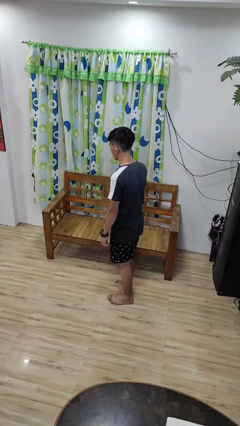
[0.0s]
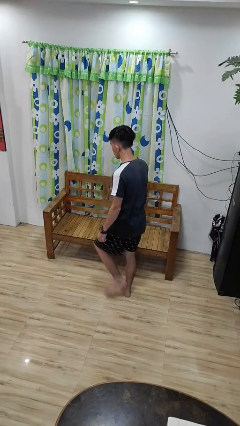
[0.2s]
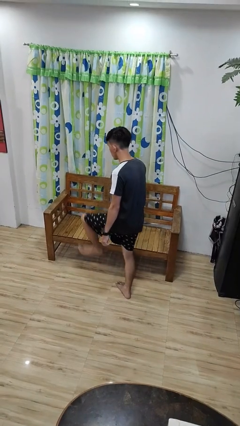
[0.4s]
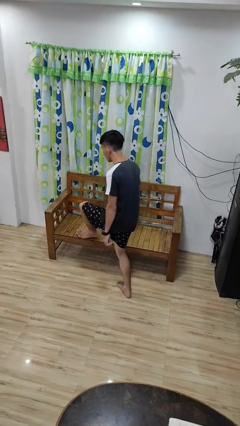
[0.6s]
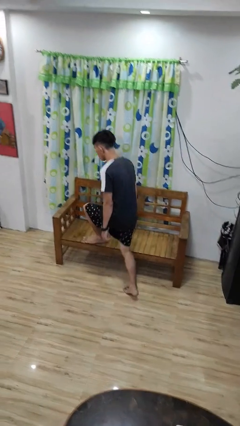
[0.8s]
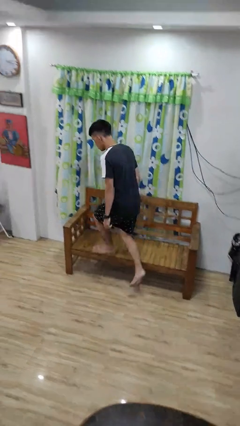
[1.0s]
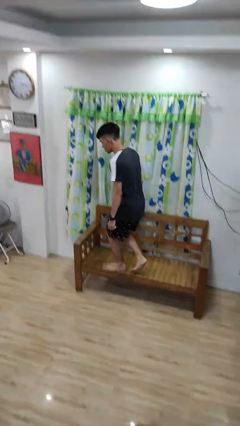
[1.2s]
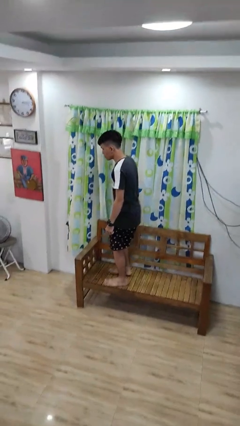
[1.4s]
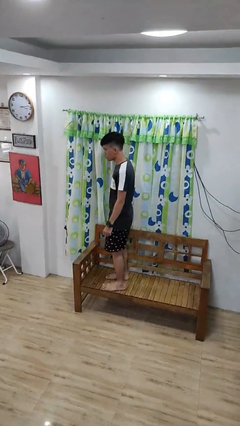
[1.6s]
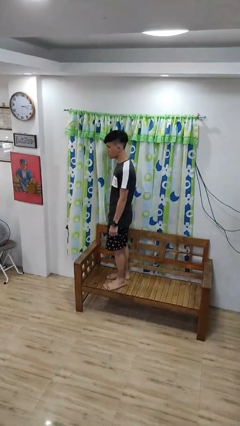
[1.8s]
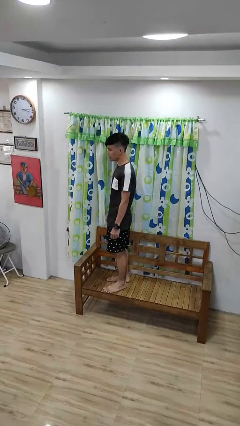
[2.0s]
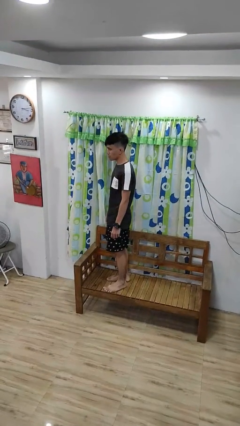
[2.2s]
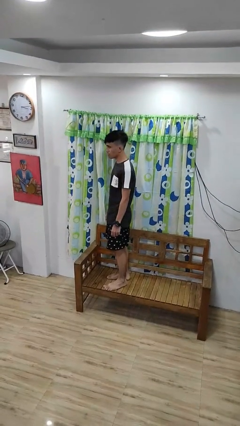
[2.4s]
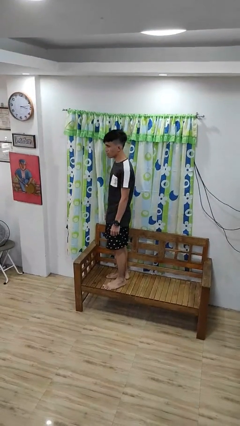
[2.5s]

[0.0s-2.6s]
person climbs on couch

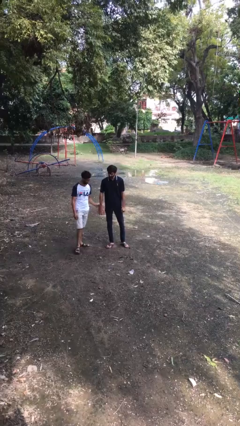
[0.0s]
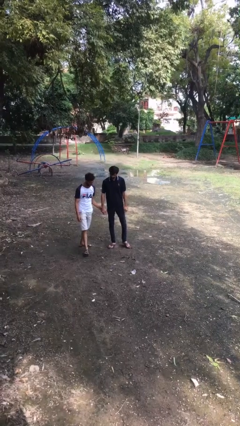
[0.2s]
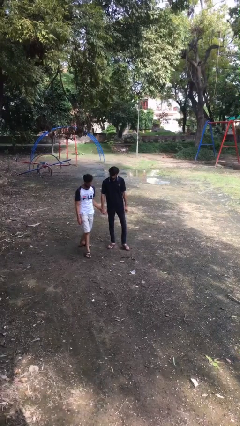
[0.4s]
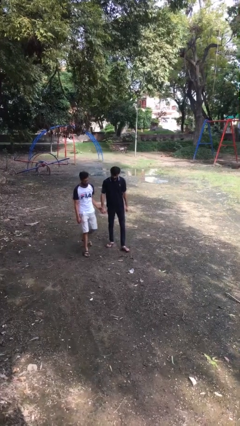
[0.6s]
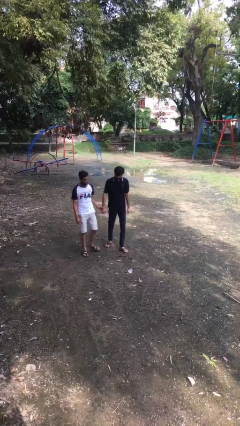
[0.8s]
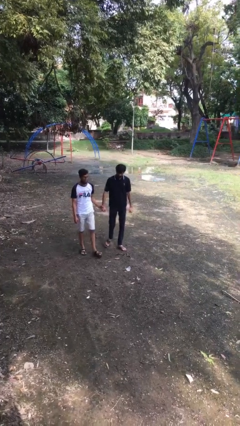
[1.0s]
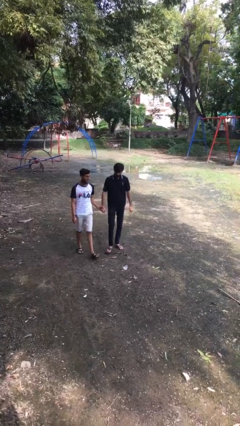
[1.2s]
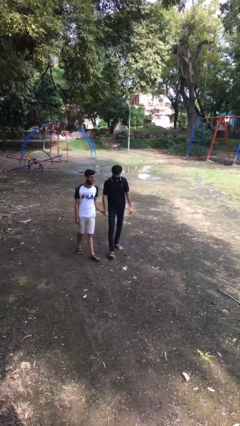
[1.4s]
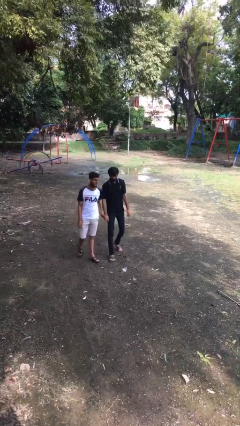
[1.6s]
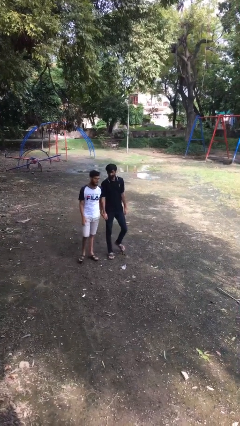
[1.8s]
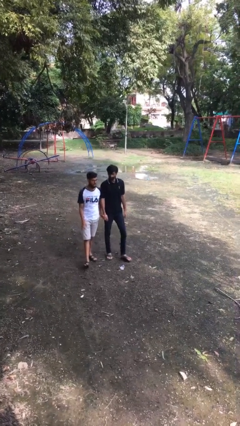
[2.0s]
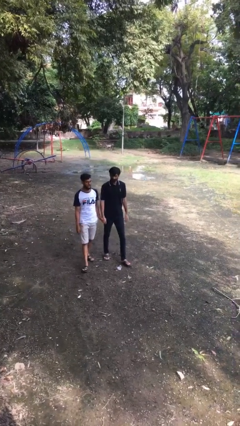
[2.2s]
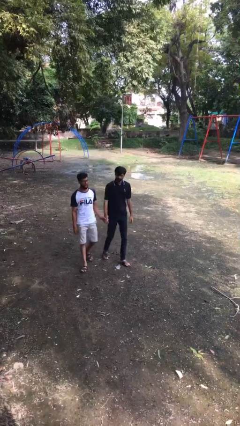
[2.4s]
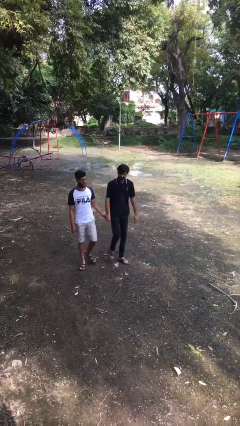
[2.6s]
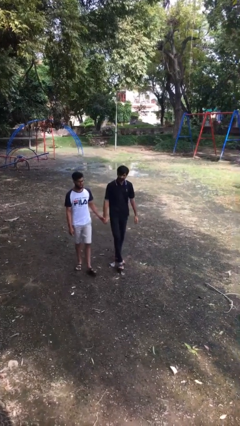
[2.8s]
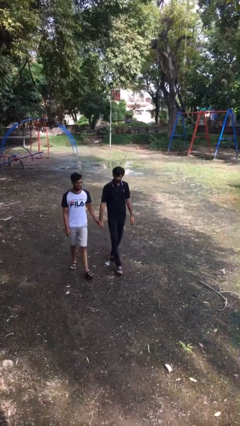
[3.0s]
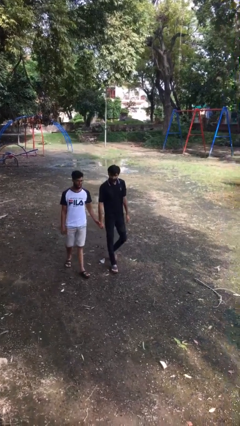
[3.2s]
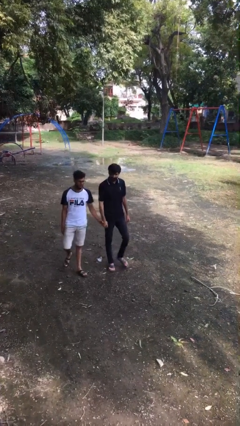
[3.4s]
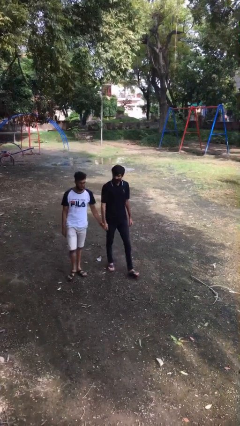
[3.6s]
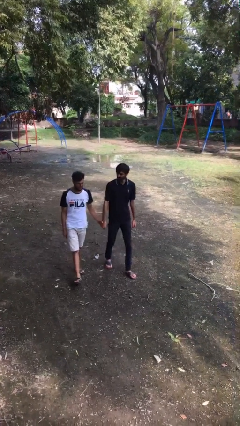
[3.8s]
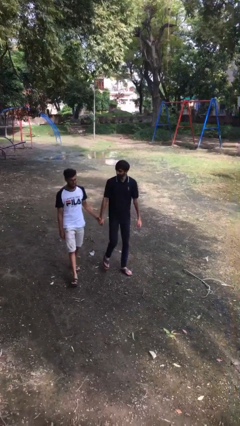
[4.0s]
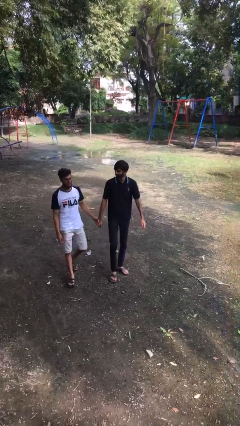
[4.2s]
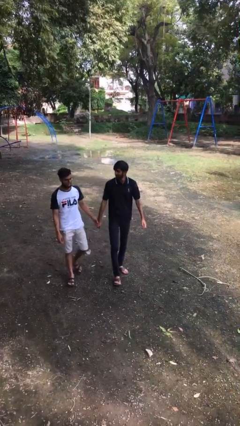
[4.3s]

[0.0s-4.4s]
person holds hand

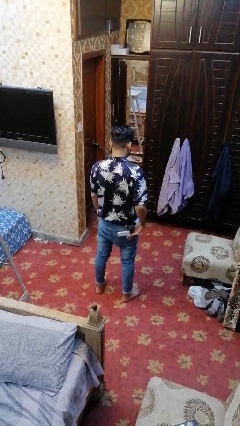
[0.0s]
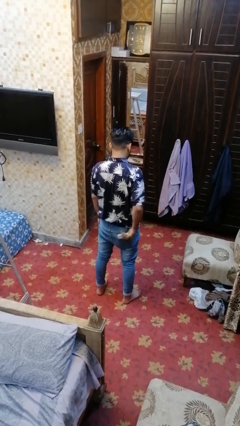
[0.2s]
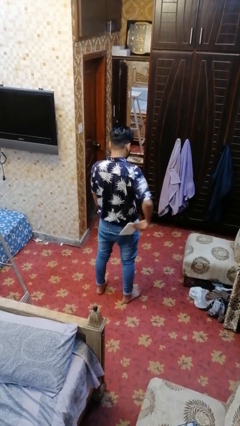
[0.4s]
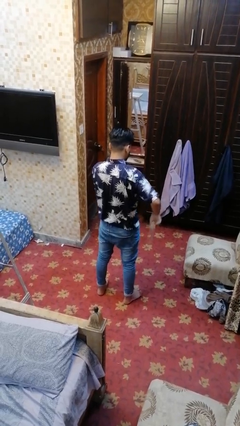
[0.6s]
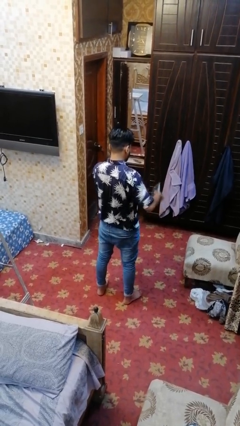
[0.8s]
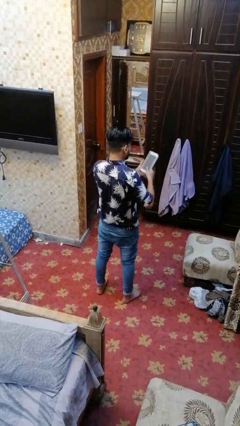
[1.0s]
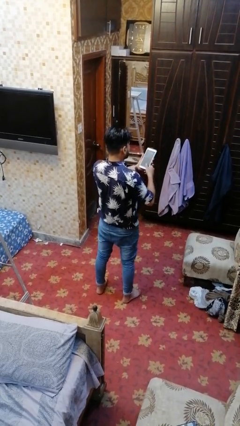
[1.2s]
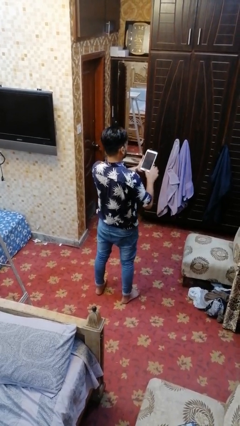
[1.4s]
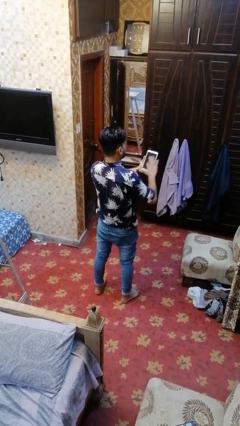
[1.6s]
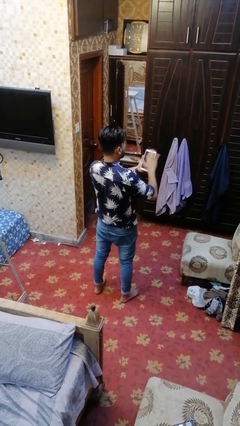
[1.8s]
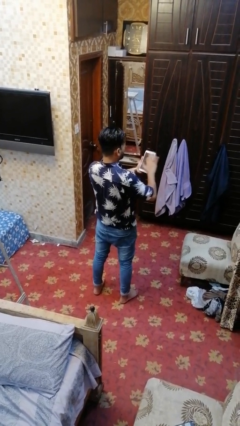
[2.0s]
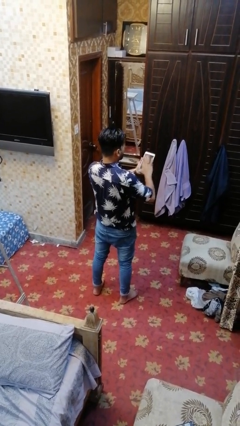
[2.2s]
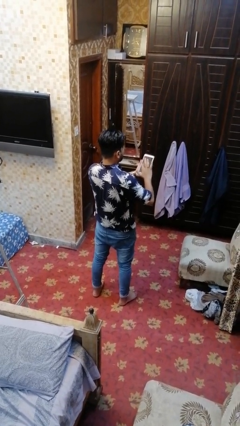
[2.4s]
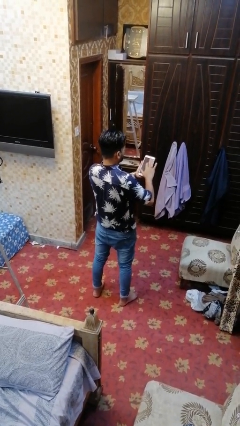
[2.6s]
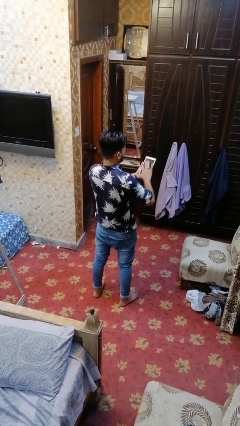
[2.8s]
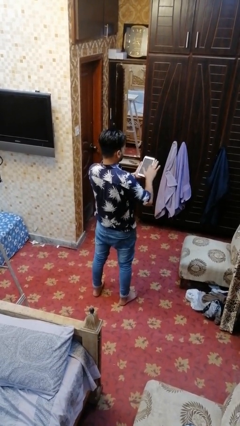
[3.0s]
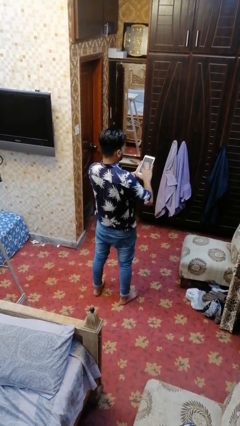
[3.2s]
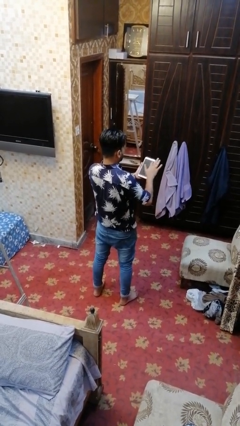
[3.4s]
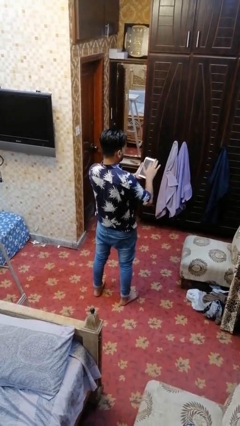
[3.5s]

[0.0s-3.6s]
person takes phone from pocket

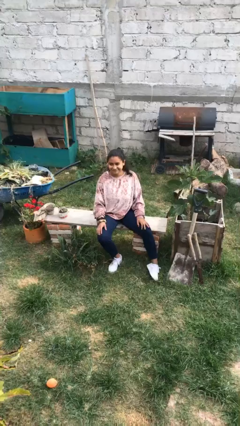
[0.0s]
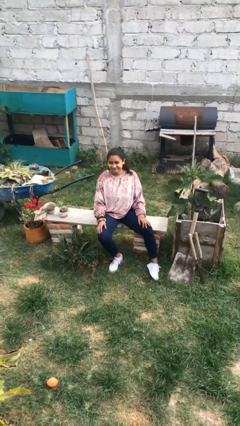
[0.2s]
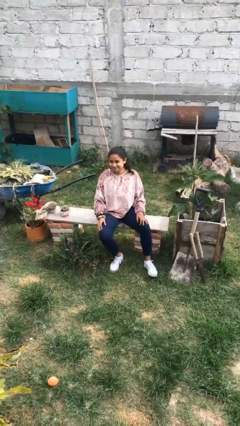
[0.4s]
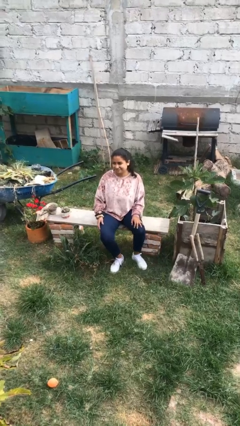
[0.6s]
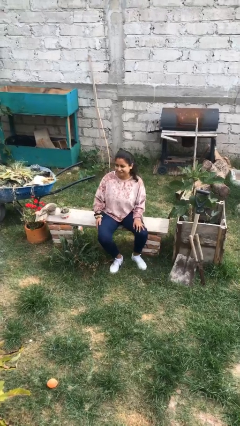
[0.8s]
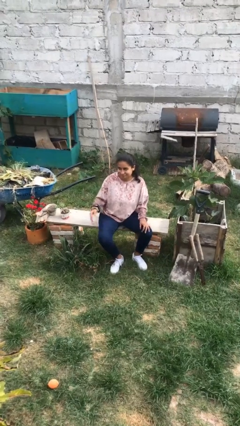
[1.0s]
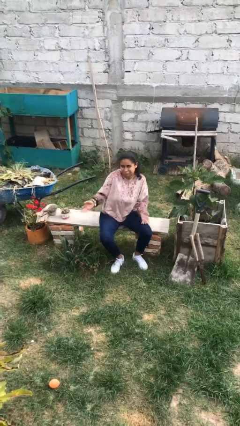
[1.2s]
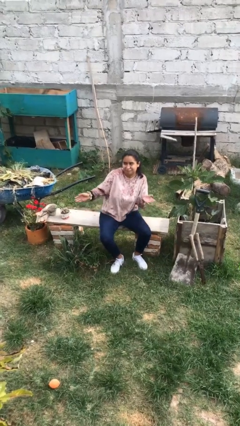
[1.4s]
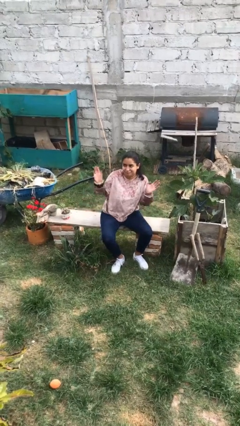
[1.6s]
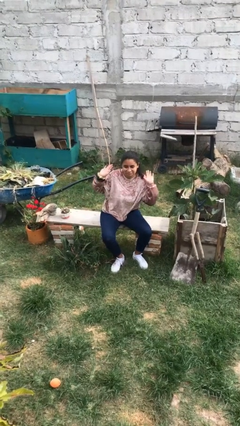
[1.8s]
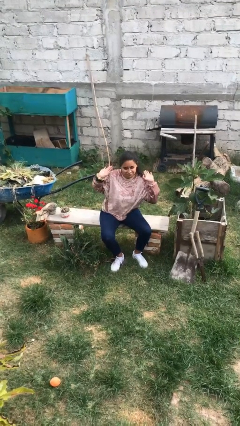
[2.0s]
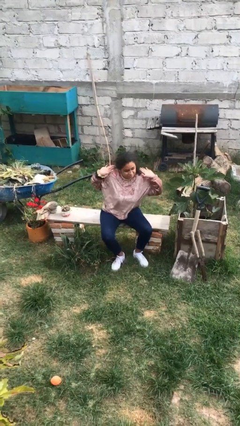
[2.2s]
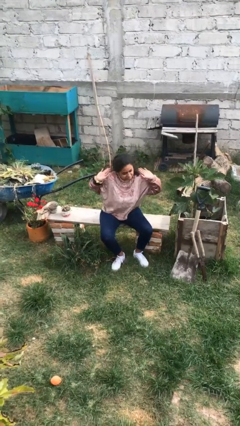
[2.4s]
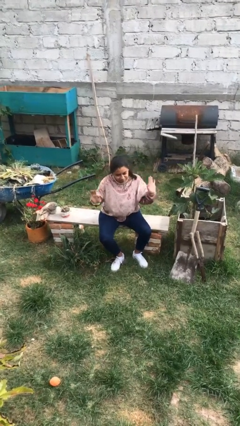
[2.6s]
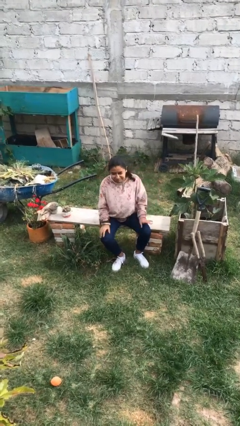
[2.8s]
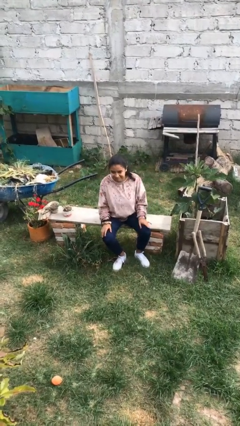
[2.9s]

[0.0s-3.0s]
person shrugs

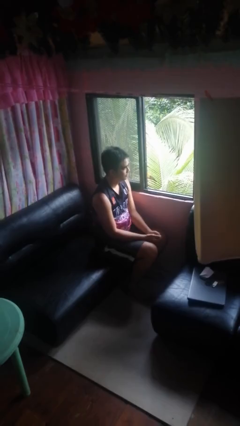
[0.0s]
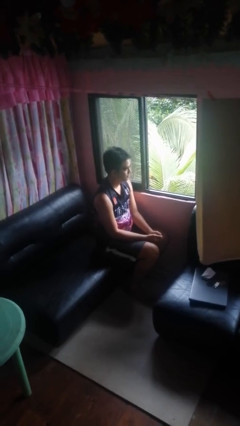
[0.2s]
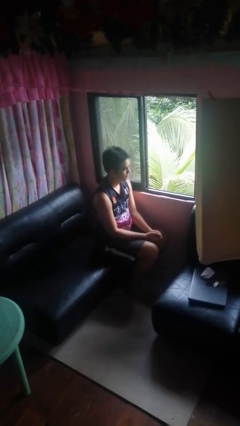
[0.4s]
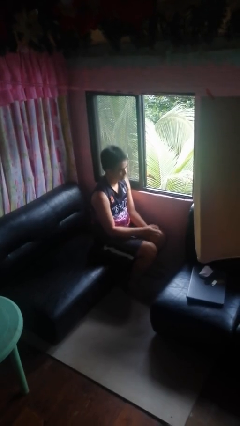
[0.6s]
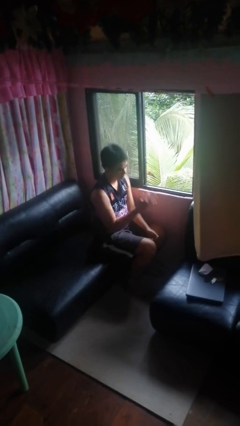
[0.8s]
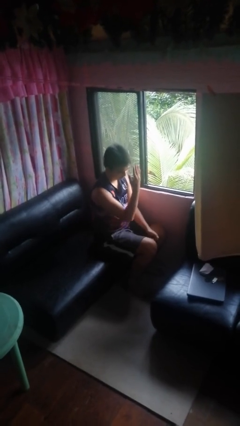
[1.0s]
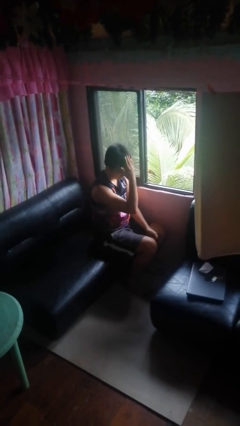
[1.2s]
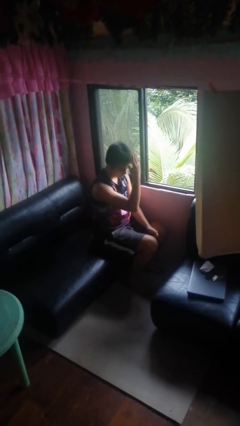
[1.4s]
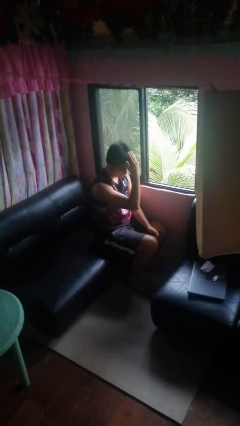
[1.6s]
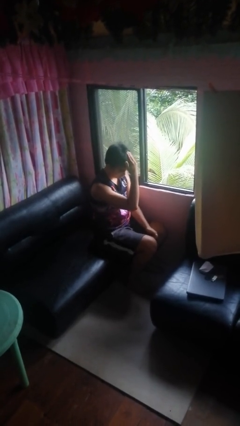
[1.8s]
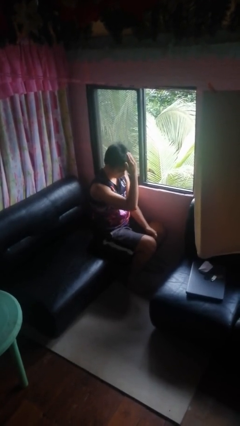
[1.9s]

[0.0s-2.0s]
person pats head

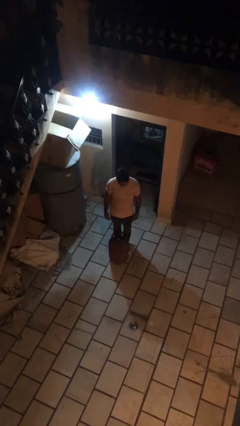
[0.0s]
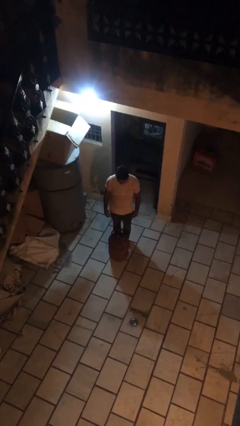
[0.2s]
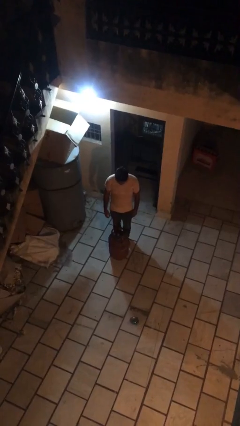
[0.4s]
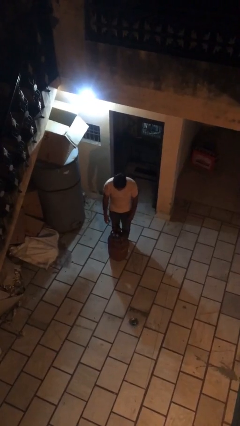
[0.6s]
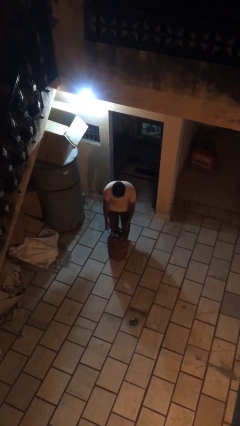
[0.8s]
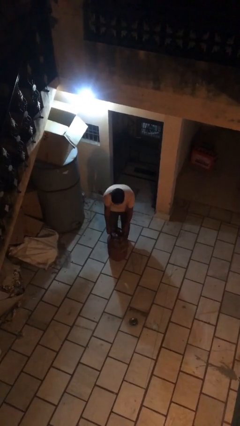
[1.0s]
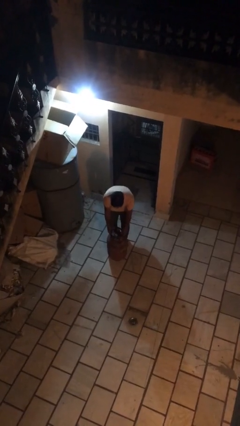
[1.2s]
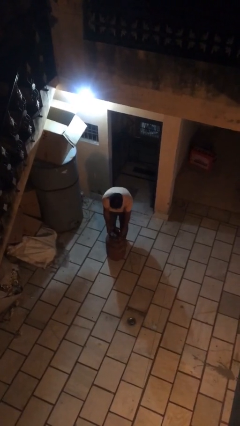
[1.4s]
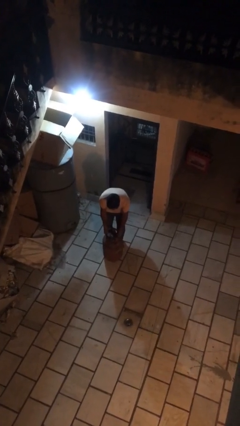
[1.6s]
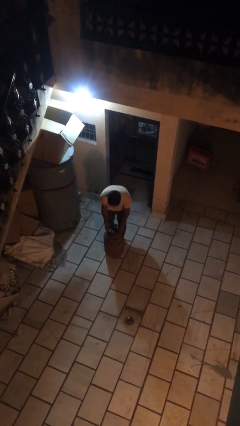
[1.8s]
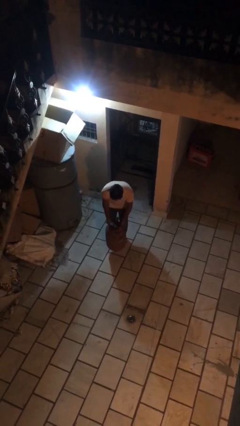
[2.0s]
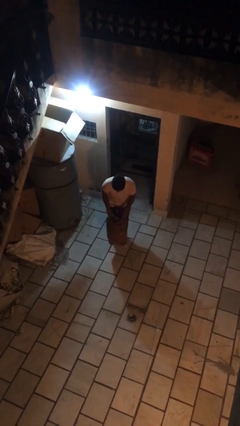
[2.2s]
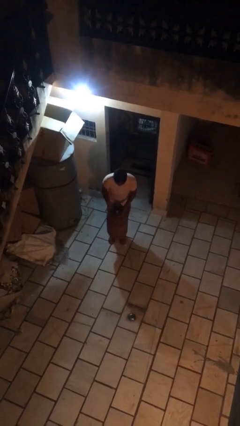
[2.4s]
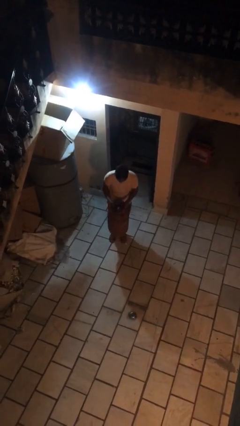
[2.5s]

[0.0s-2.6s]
person picks up object from floor
